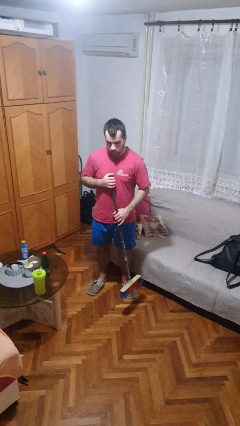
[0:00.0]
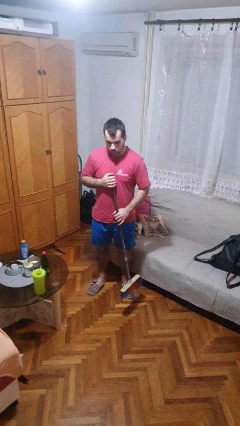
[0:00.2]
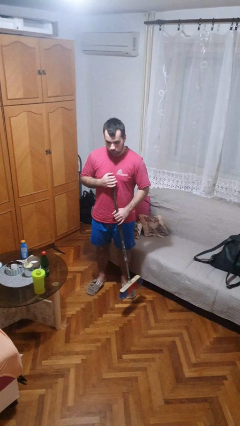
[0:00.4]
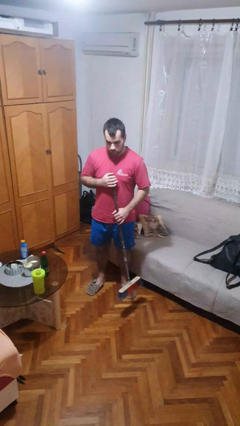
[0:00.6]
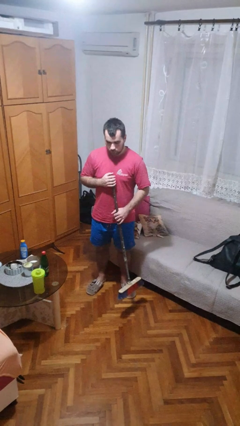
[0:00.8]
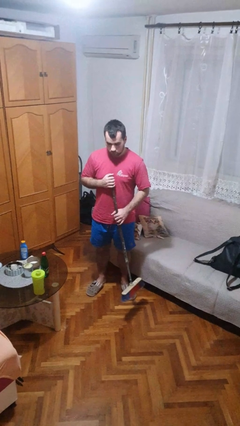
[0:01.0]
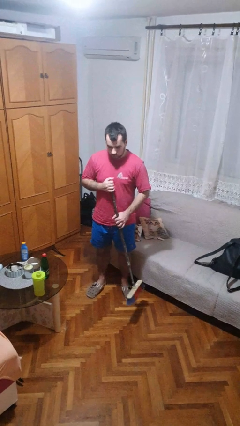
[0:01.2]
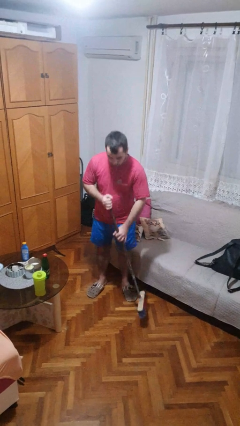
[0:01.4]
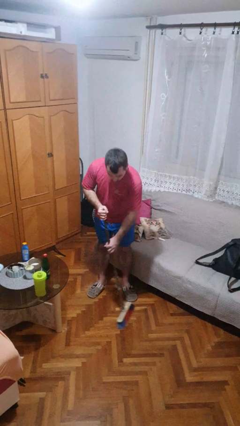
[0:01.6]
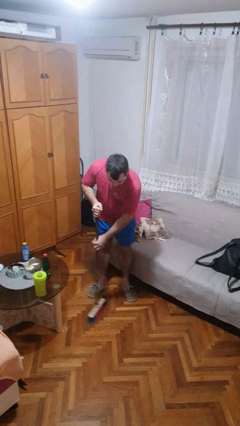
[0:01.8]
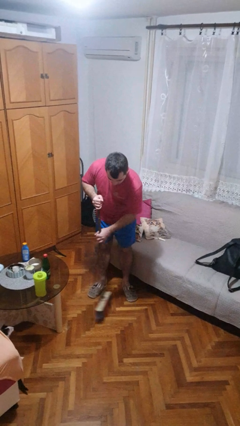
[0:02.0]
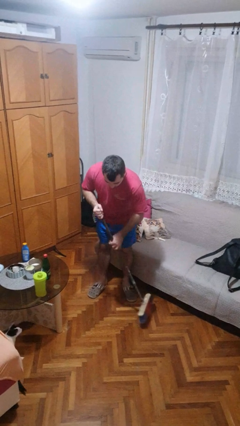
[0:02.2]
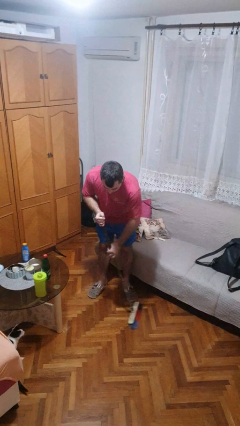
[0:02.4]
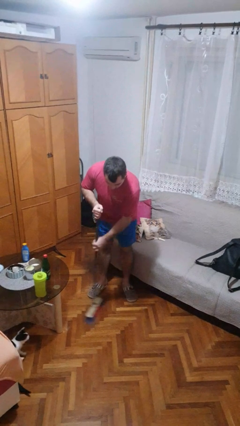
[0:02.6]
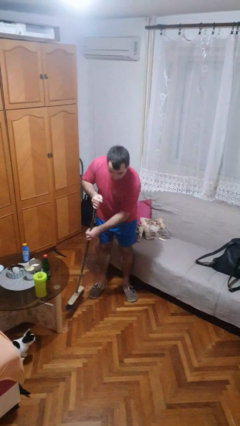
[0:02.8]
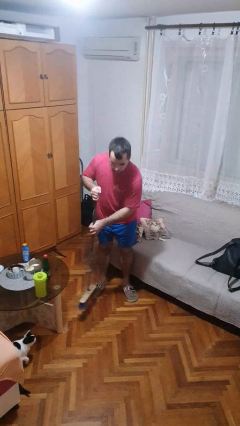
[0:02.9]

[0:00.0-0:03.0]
person sweeps floor

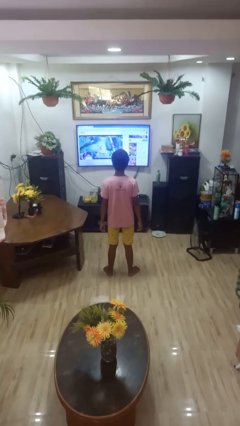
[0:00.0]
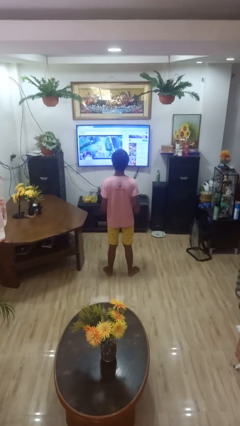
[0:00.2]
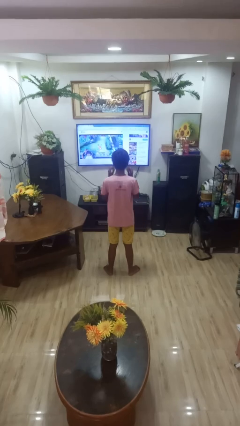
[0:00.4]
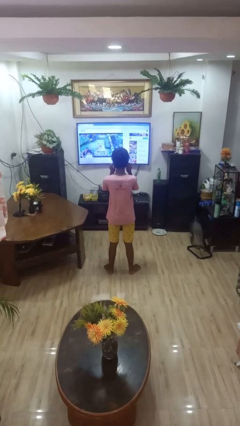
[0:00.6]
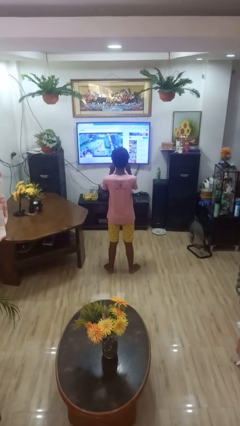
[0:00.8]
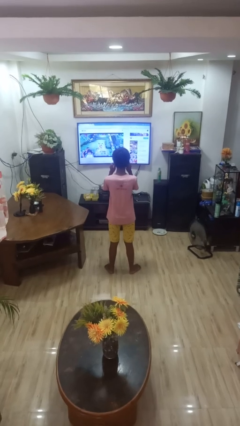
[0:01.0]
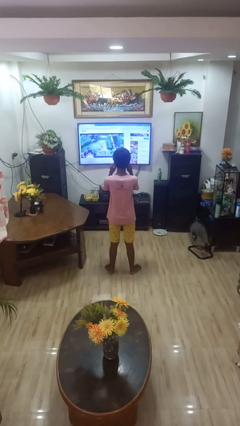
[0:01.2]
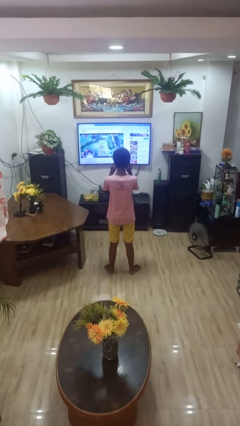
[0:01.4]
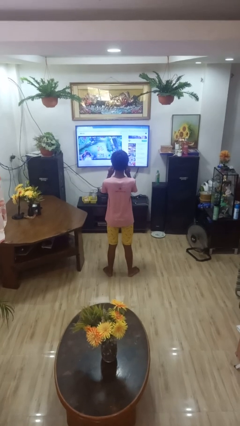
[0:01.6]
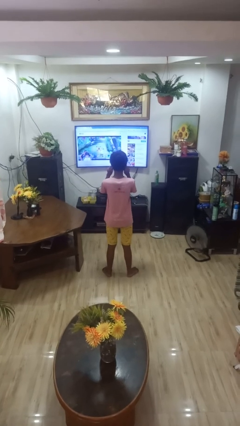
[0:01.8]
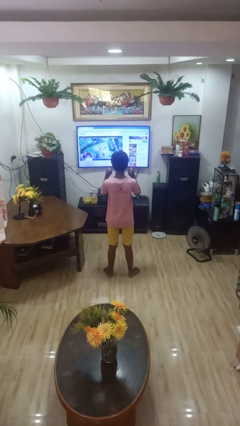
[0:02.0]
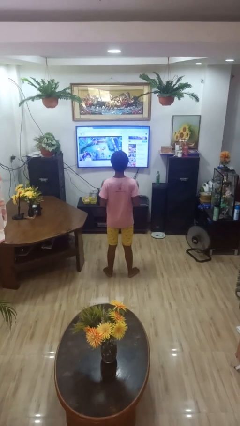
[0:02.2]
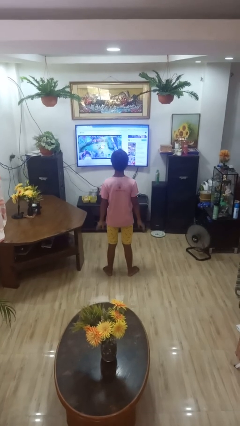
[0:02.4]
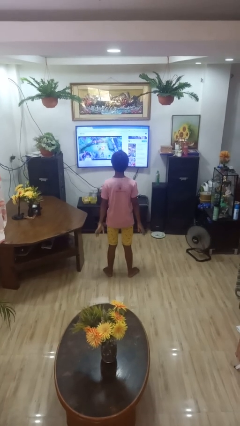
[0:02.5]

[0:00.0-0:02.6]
person touches earlobe

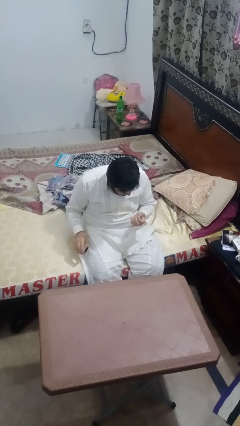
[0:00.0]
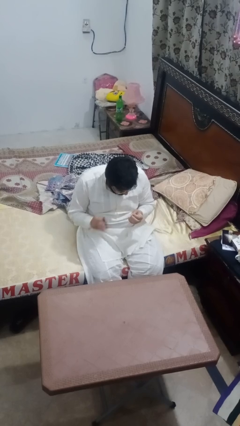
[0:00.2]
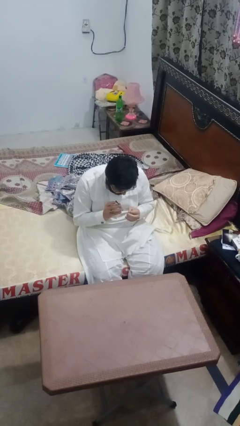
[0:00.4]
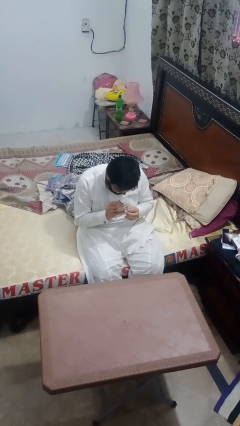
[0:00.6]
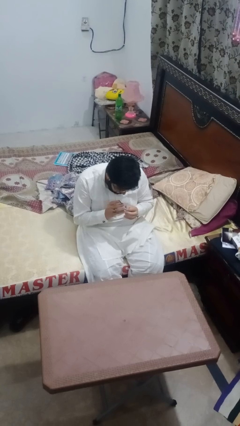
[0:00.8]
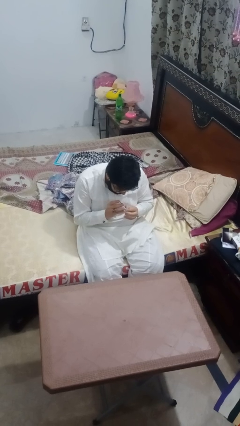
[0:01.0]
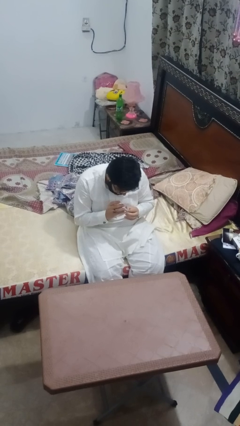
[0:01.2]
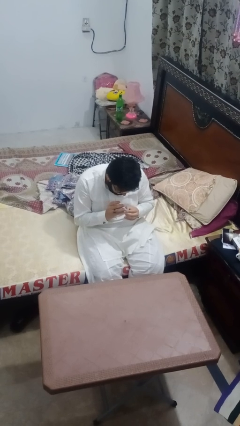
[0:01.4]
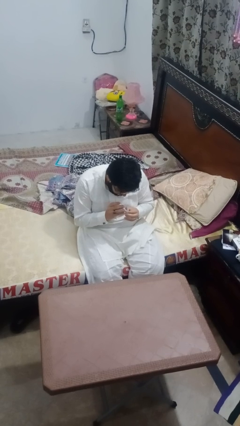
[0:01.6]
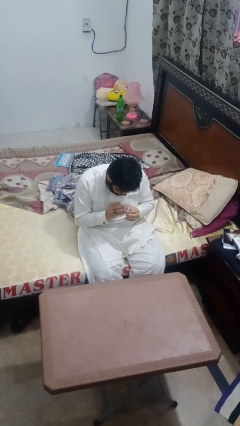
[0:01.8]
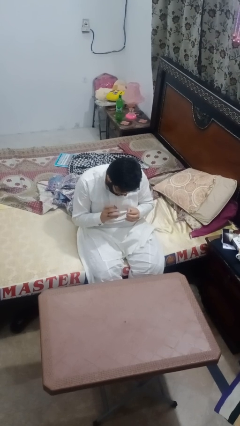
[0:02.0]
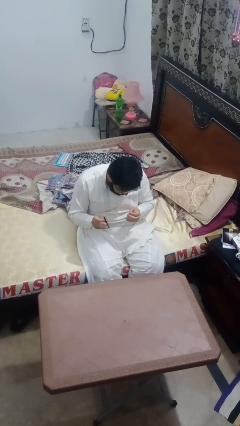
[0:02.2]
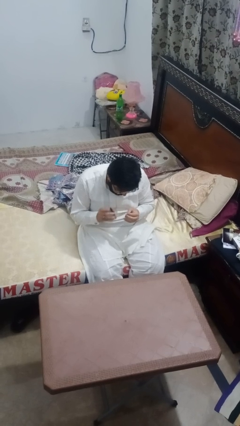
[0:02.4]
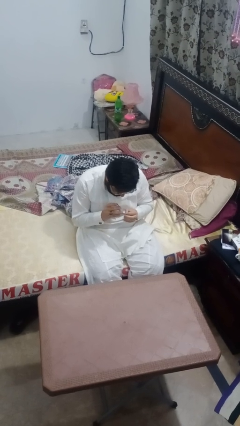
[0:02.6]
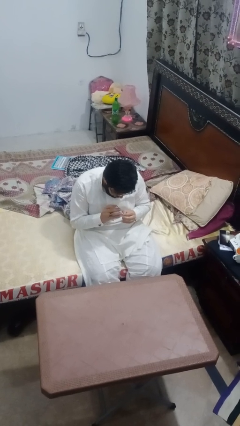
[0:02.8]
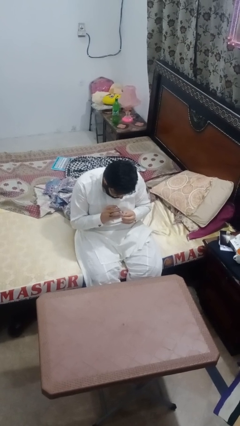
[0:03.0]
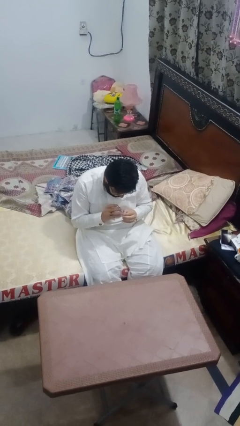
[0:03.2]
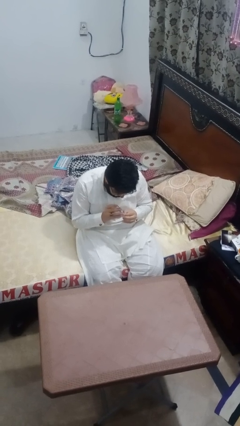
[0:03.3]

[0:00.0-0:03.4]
person clips fingernails

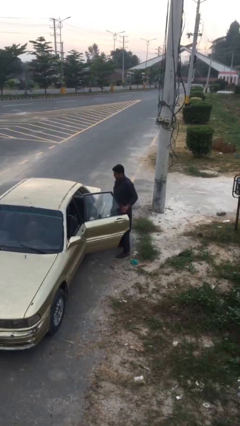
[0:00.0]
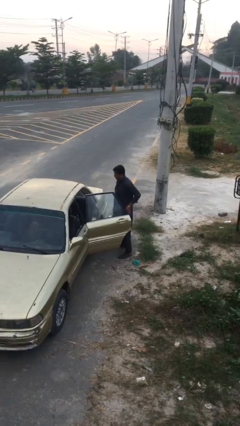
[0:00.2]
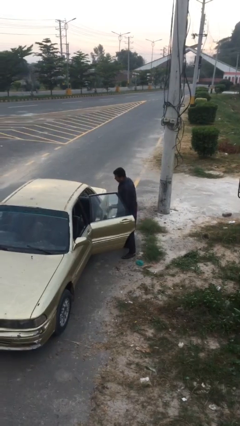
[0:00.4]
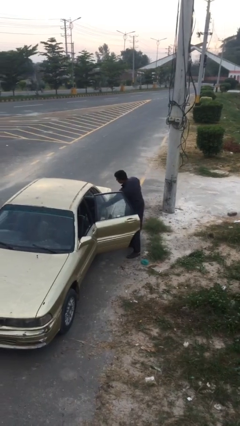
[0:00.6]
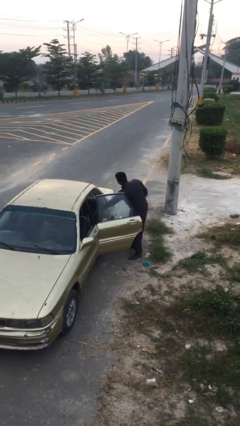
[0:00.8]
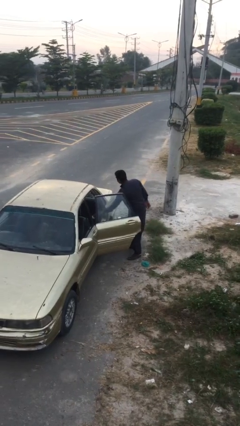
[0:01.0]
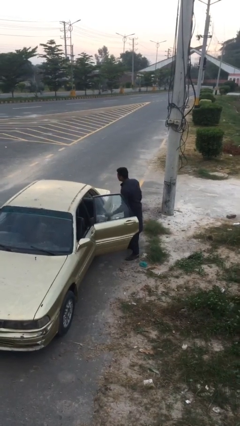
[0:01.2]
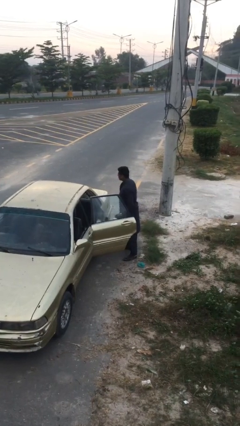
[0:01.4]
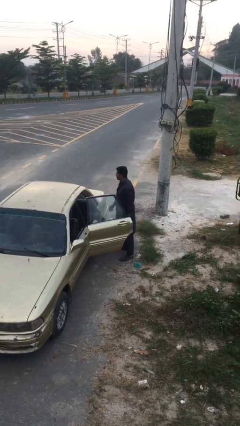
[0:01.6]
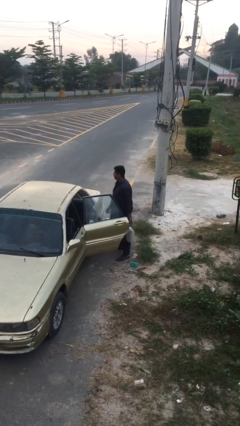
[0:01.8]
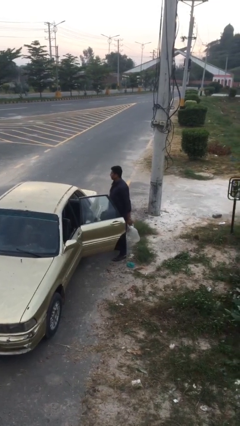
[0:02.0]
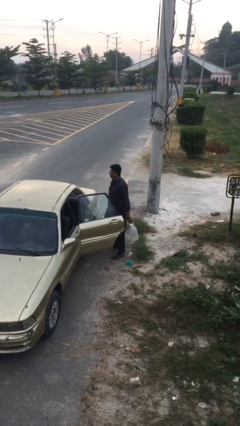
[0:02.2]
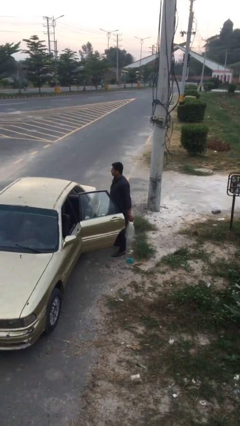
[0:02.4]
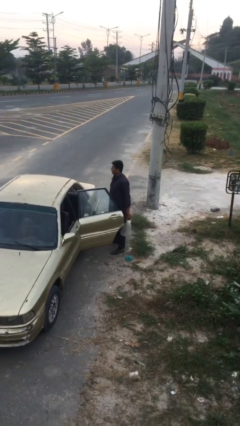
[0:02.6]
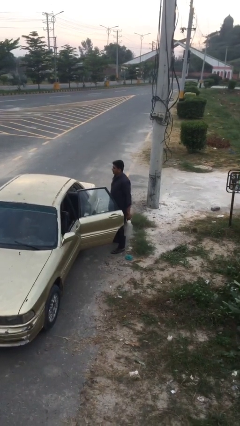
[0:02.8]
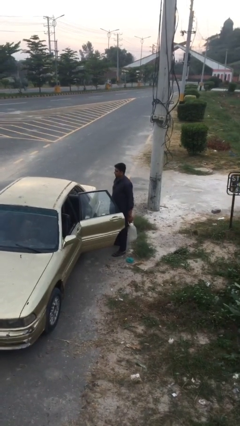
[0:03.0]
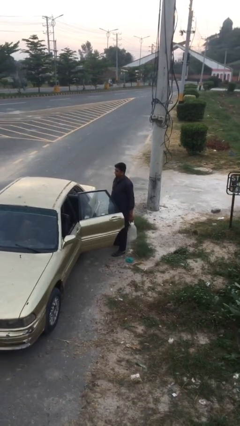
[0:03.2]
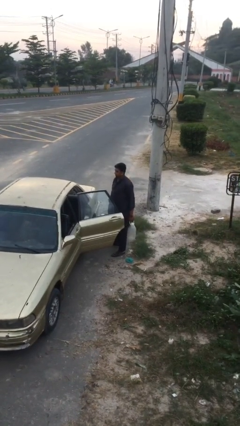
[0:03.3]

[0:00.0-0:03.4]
person unloads car

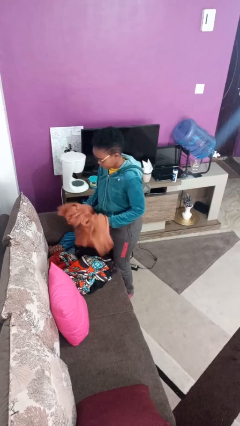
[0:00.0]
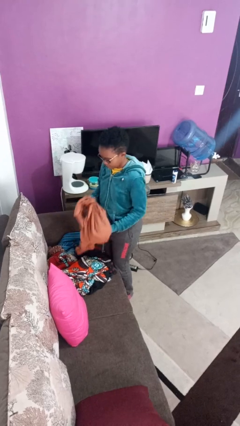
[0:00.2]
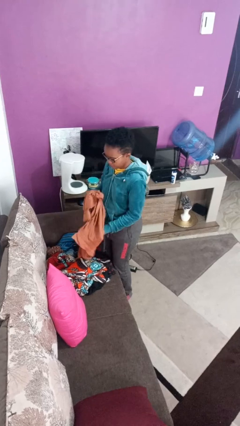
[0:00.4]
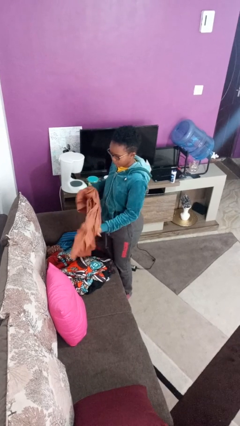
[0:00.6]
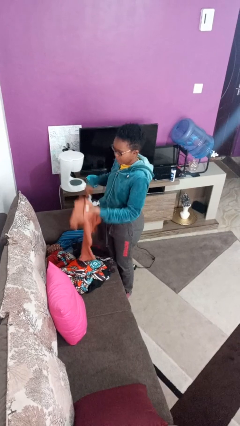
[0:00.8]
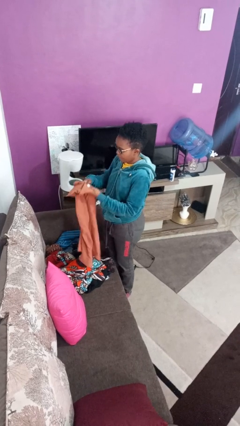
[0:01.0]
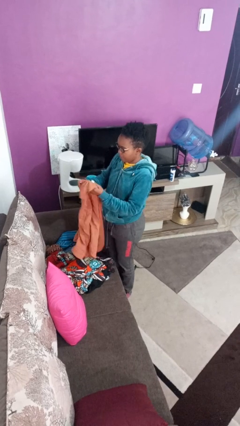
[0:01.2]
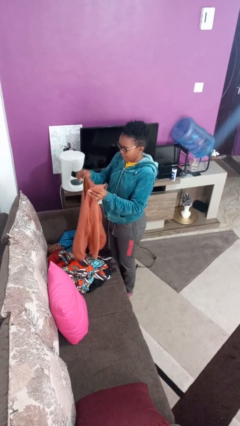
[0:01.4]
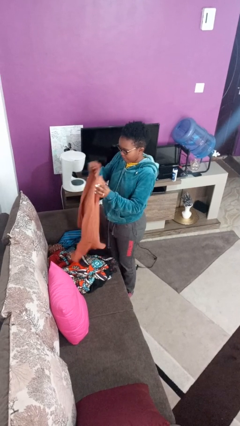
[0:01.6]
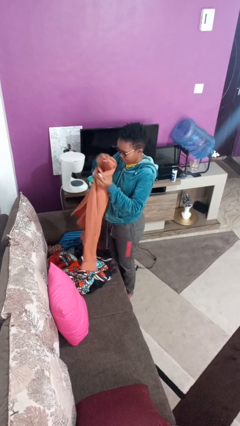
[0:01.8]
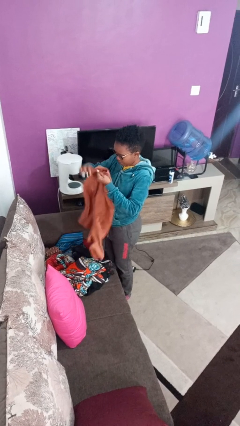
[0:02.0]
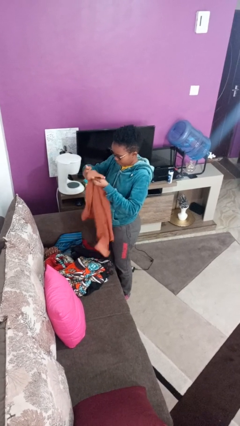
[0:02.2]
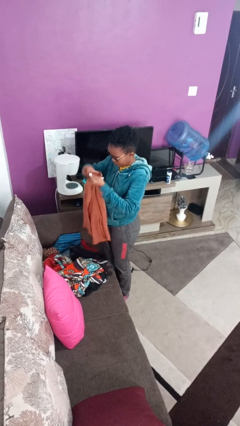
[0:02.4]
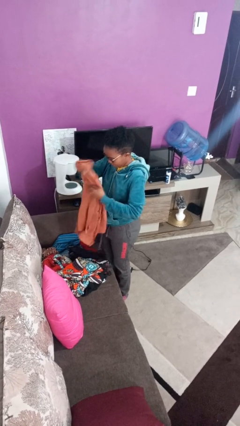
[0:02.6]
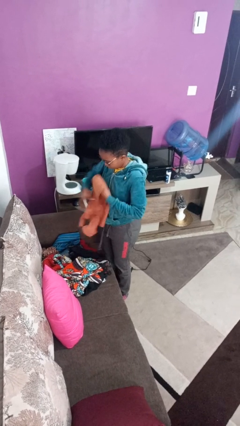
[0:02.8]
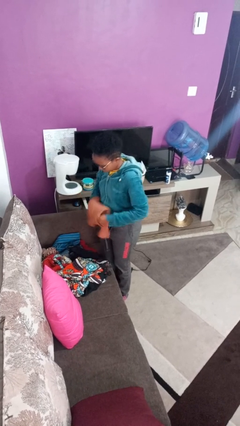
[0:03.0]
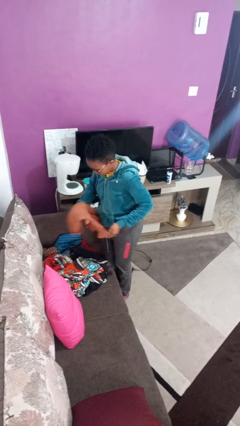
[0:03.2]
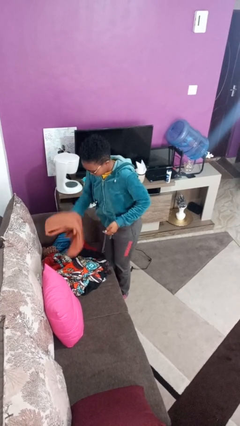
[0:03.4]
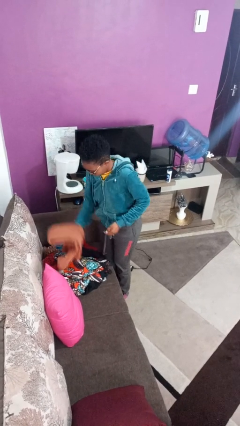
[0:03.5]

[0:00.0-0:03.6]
person folds shirt

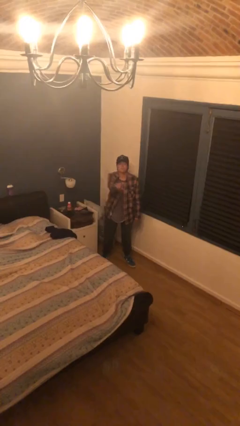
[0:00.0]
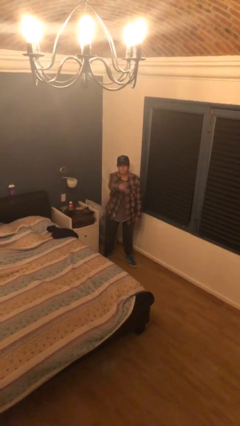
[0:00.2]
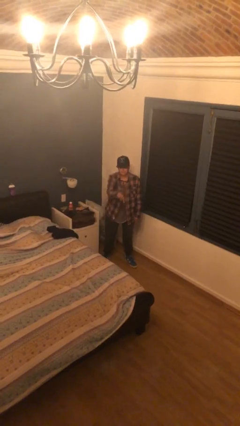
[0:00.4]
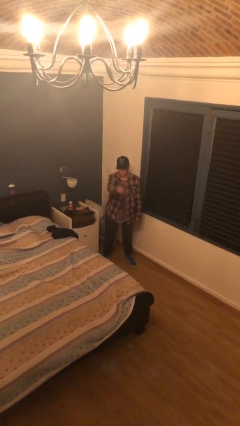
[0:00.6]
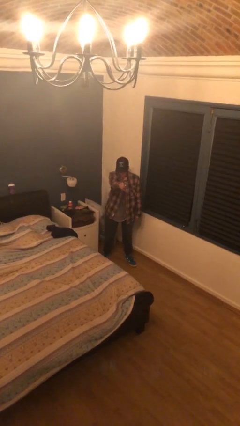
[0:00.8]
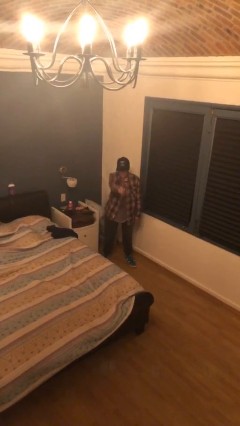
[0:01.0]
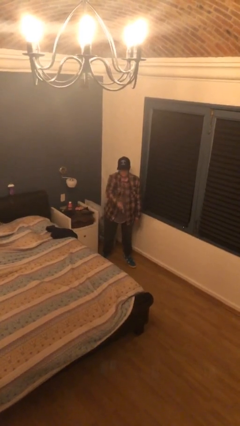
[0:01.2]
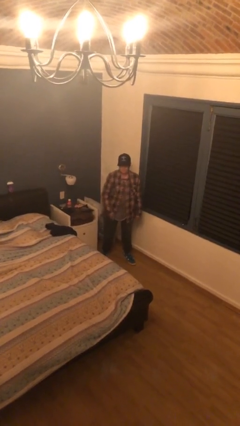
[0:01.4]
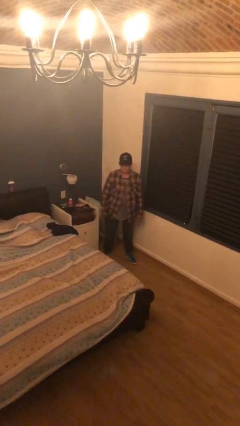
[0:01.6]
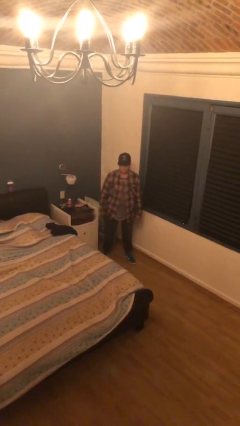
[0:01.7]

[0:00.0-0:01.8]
person points at person
